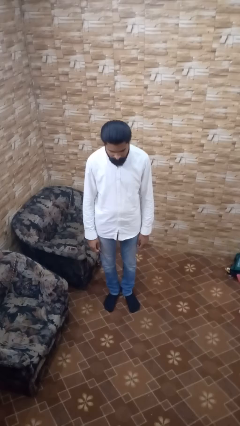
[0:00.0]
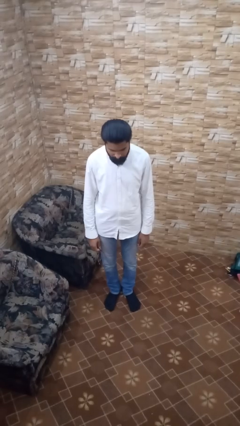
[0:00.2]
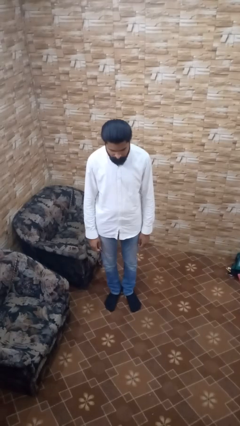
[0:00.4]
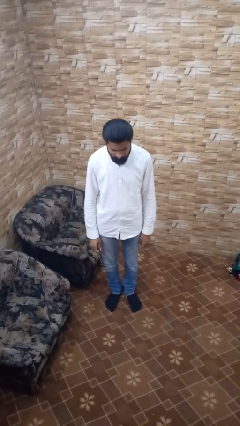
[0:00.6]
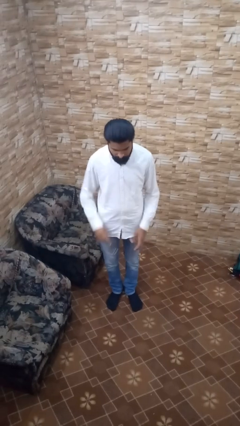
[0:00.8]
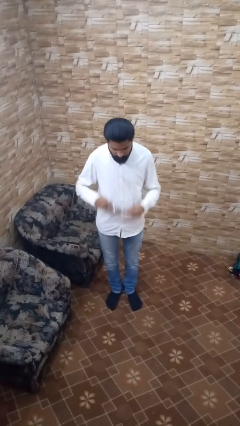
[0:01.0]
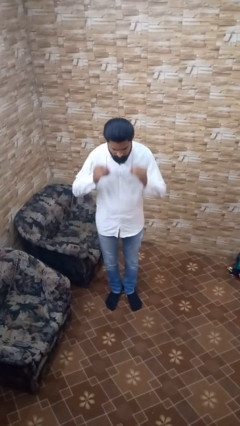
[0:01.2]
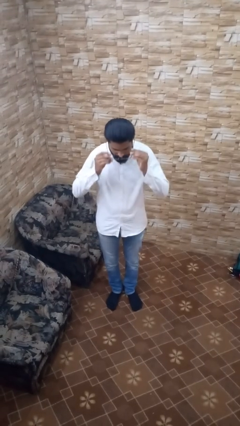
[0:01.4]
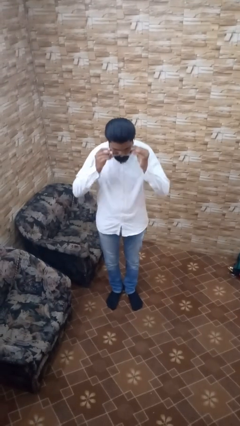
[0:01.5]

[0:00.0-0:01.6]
person puts on glasses

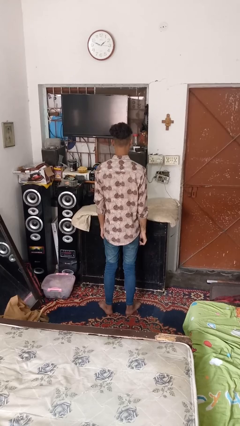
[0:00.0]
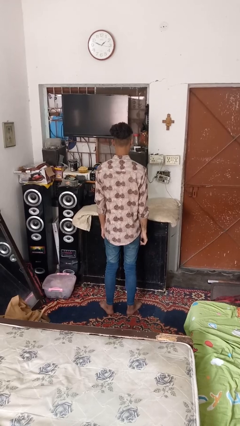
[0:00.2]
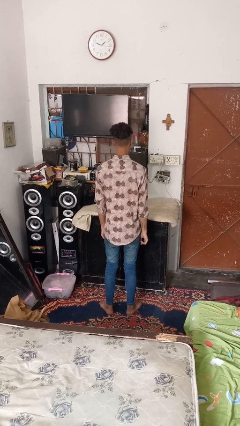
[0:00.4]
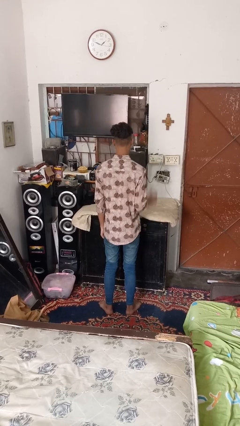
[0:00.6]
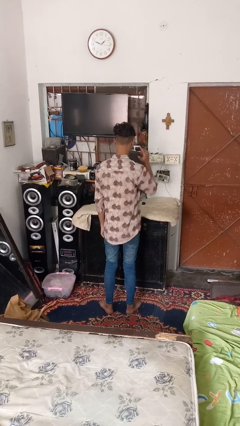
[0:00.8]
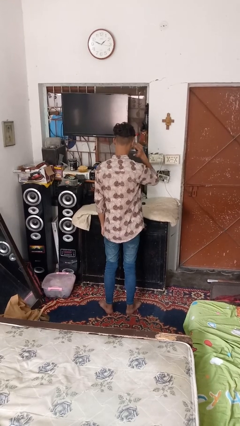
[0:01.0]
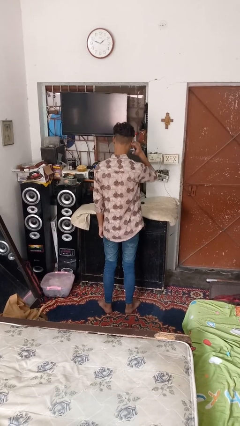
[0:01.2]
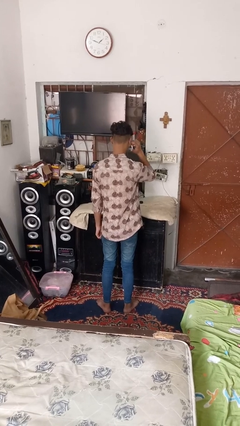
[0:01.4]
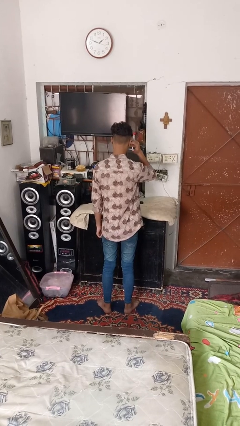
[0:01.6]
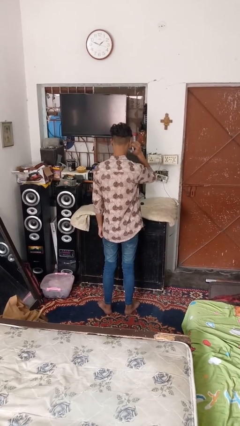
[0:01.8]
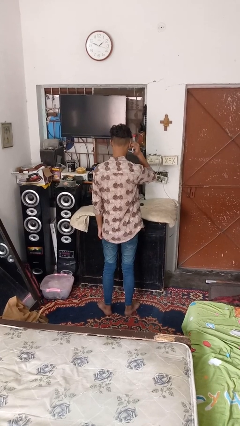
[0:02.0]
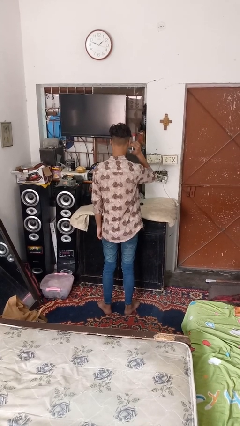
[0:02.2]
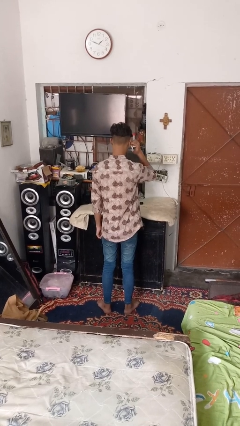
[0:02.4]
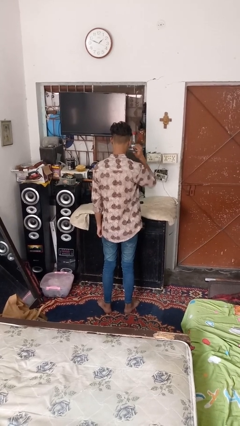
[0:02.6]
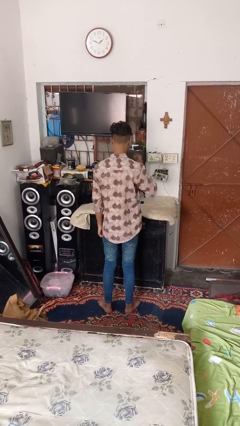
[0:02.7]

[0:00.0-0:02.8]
person puts fingers in ear

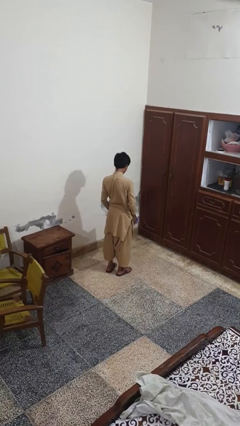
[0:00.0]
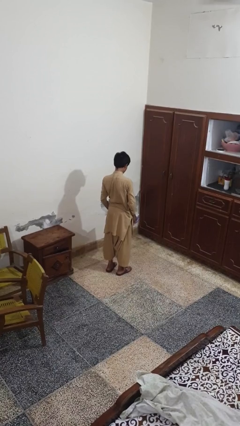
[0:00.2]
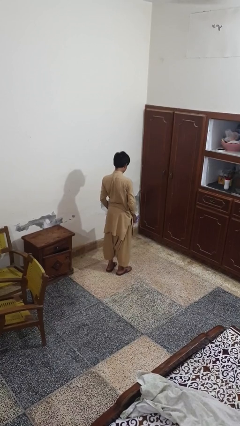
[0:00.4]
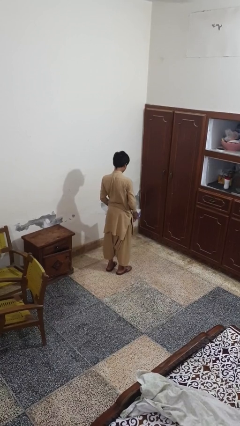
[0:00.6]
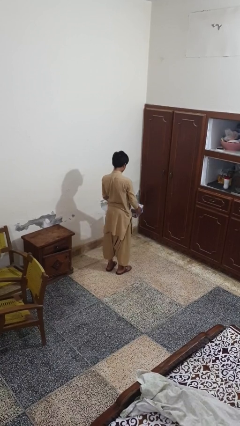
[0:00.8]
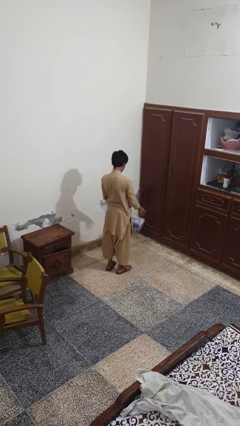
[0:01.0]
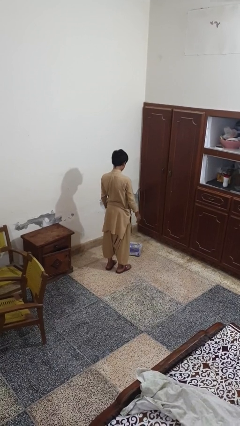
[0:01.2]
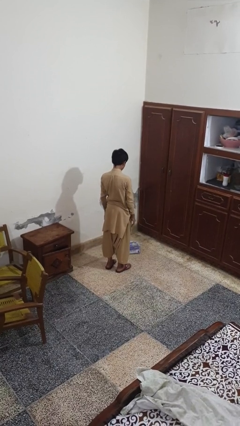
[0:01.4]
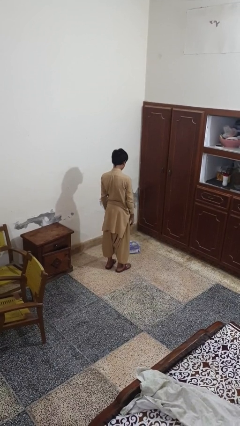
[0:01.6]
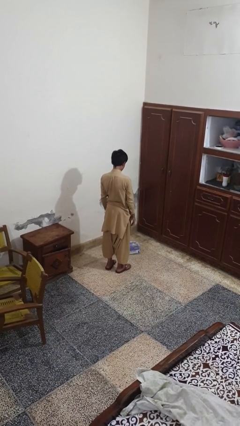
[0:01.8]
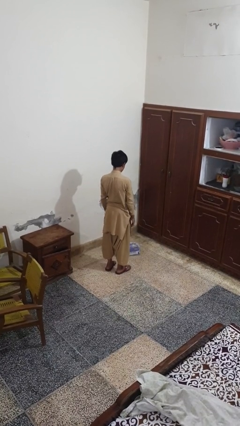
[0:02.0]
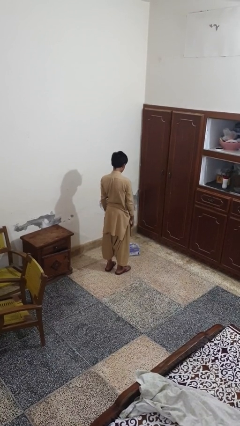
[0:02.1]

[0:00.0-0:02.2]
person throws object to ground

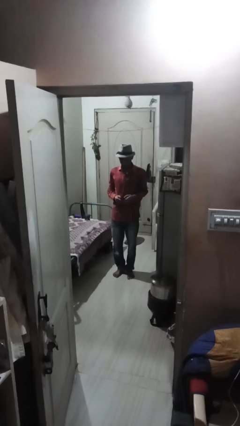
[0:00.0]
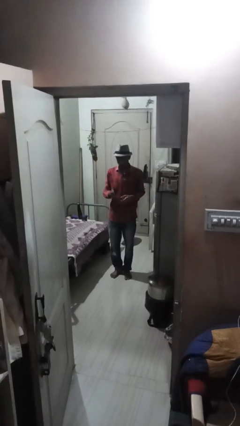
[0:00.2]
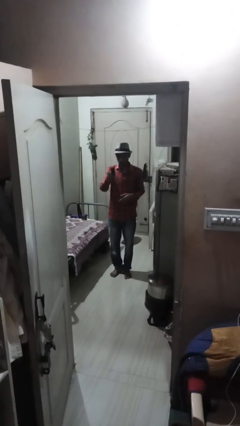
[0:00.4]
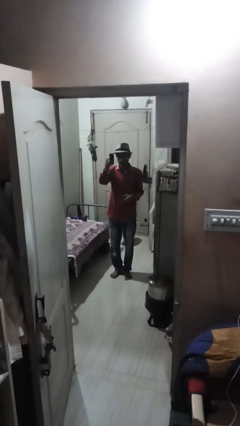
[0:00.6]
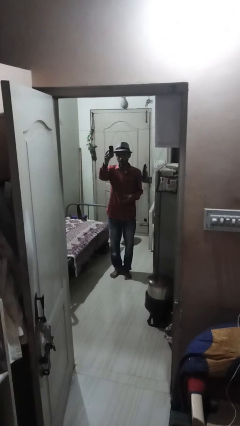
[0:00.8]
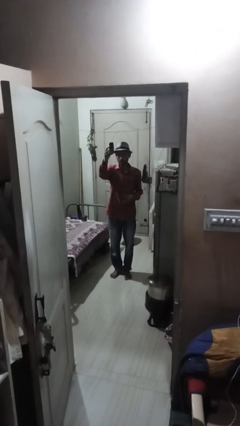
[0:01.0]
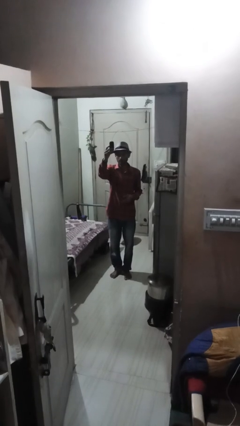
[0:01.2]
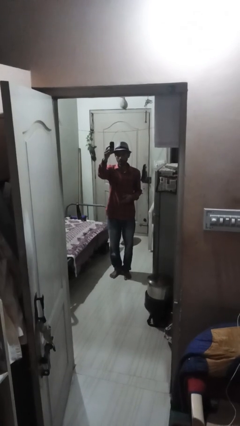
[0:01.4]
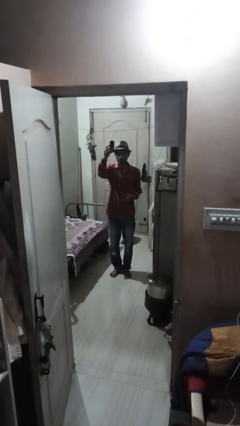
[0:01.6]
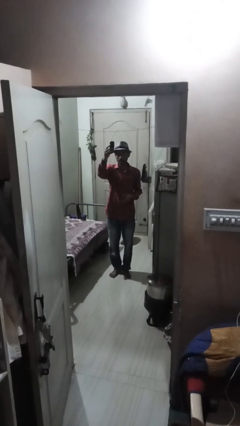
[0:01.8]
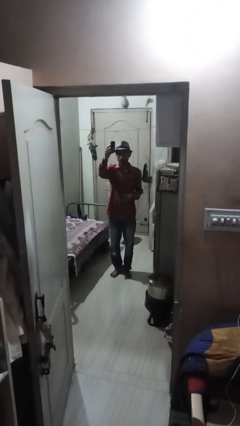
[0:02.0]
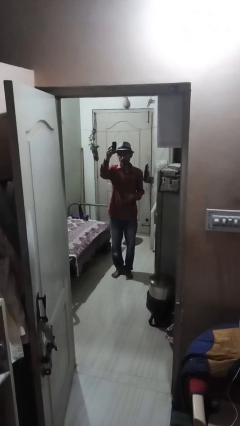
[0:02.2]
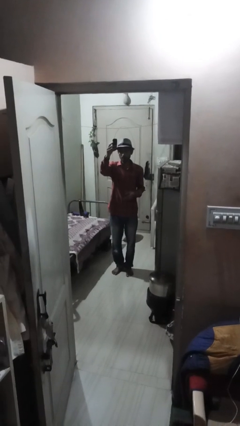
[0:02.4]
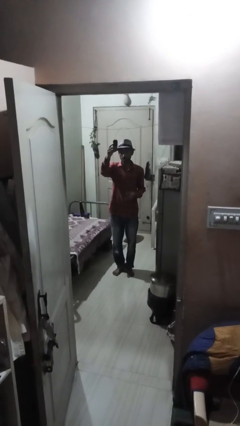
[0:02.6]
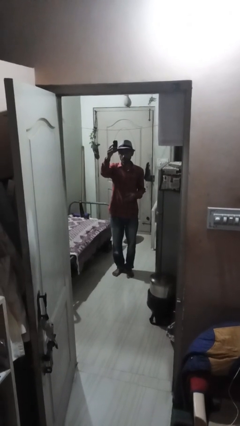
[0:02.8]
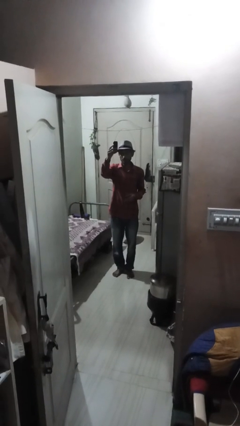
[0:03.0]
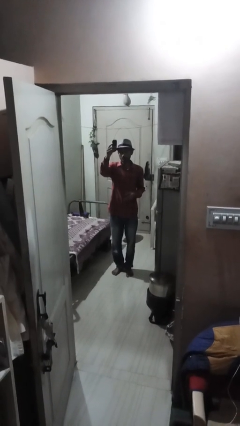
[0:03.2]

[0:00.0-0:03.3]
person takes selfie

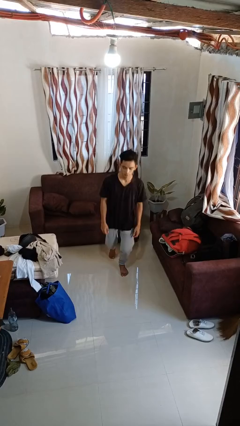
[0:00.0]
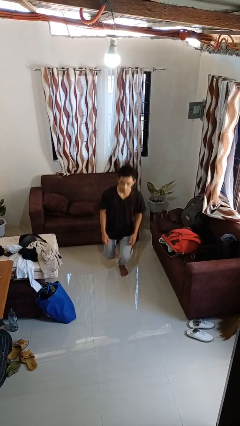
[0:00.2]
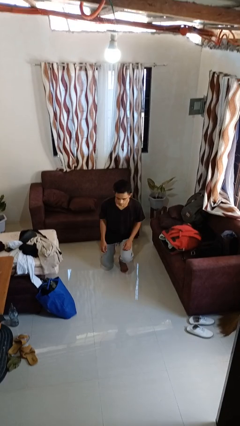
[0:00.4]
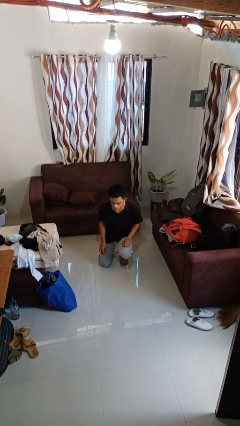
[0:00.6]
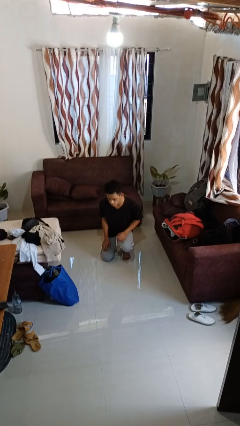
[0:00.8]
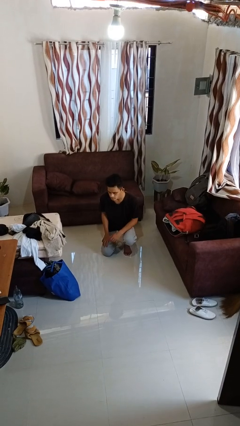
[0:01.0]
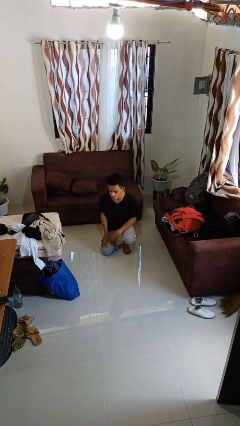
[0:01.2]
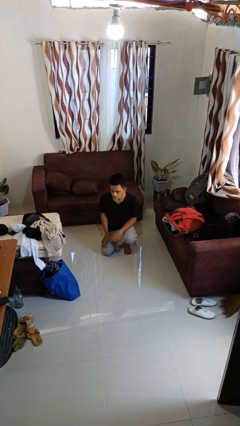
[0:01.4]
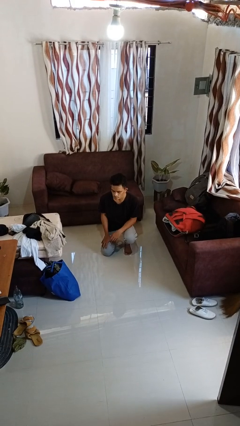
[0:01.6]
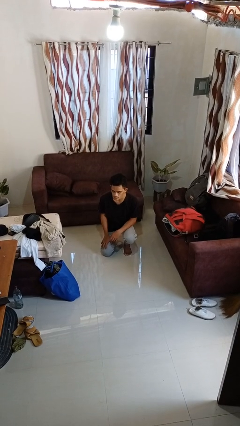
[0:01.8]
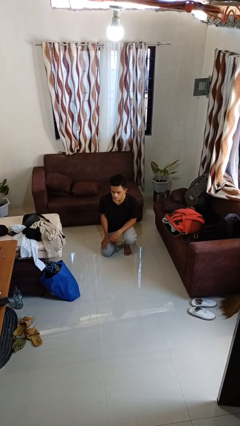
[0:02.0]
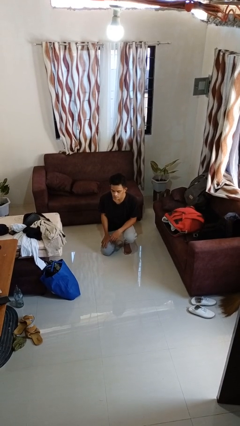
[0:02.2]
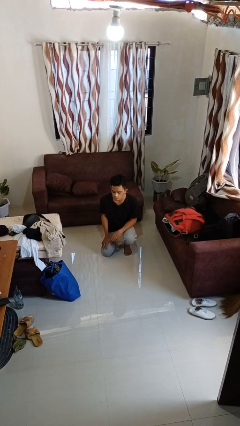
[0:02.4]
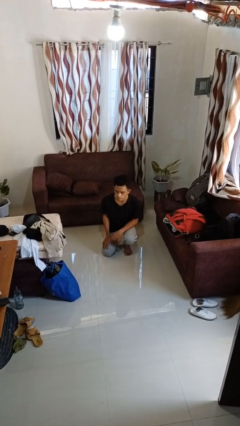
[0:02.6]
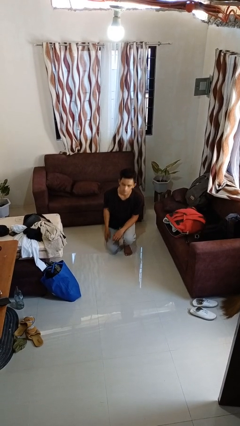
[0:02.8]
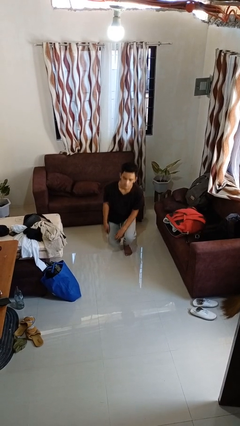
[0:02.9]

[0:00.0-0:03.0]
person kneels

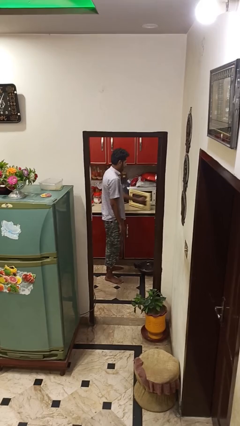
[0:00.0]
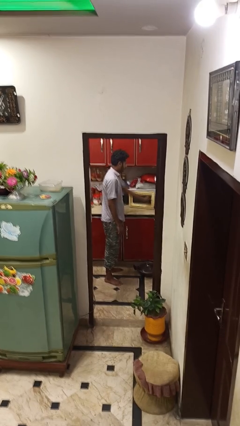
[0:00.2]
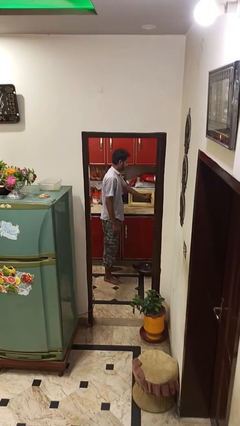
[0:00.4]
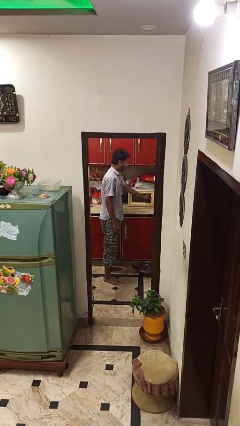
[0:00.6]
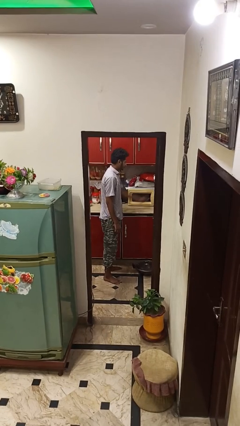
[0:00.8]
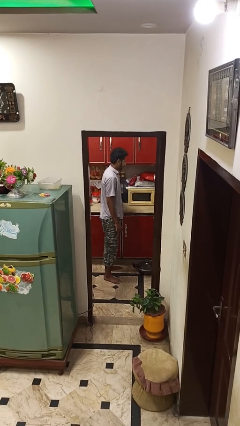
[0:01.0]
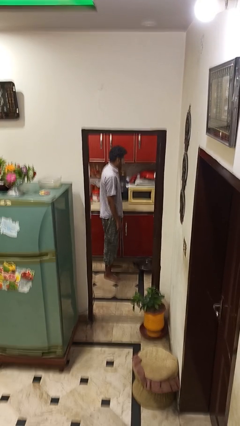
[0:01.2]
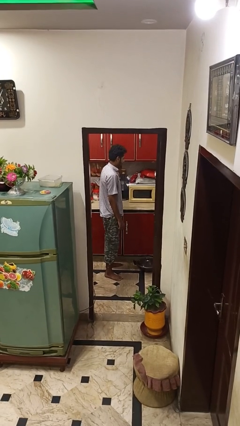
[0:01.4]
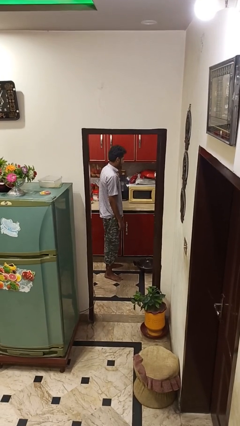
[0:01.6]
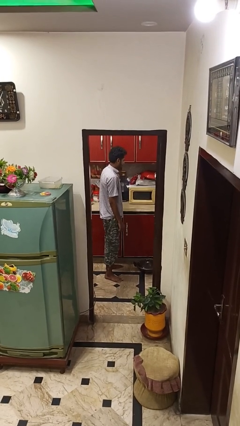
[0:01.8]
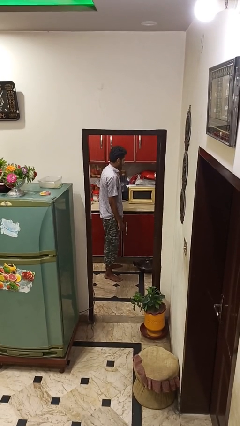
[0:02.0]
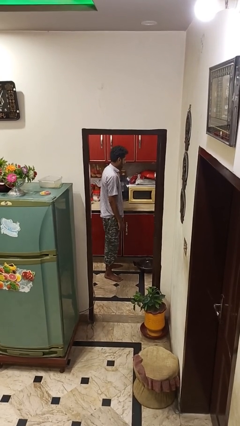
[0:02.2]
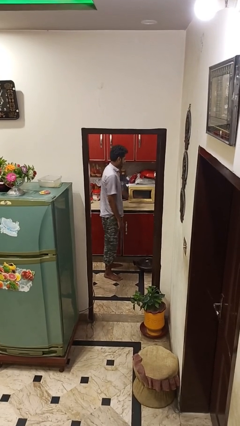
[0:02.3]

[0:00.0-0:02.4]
person closes microwave

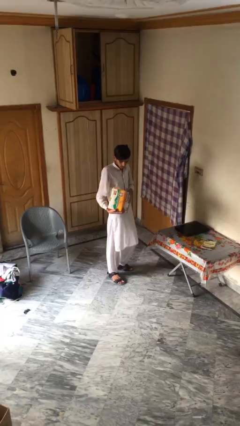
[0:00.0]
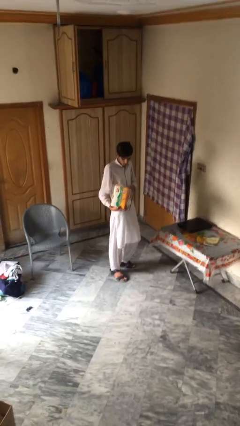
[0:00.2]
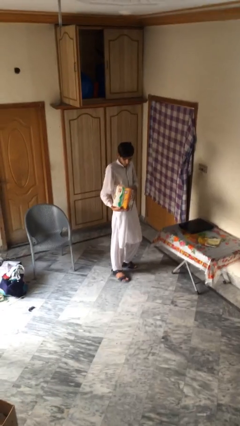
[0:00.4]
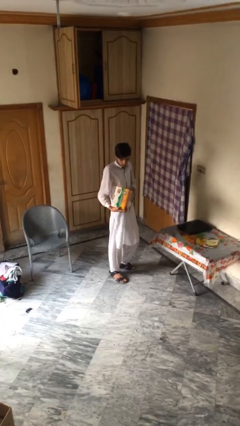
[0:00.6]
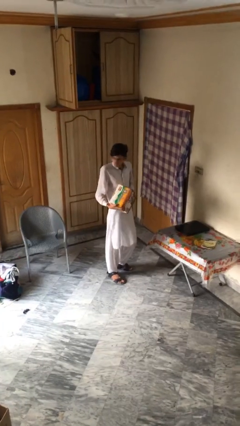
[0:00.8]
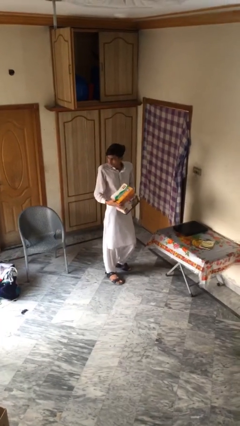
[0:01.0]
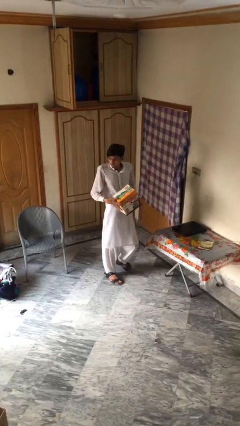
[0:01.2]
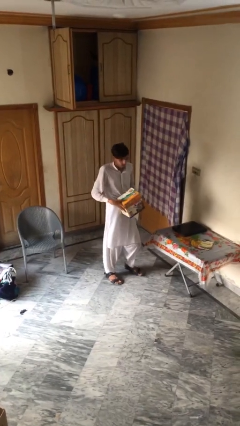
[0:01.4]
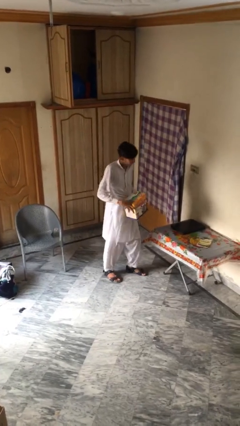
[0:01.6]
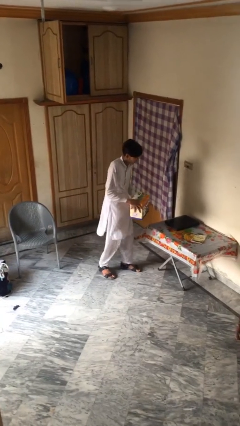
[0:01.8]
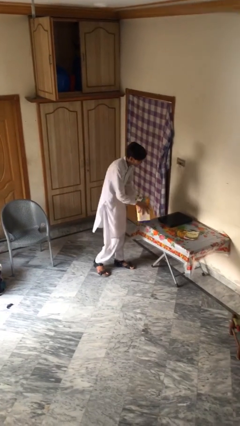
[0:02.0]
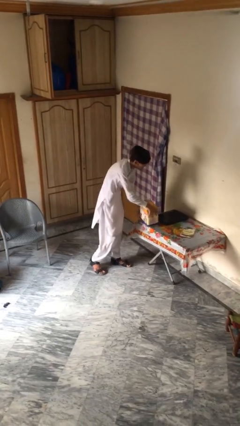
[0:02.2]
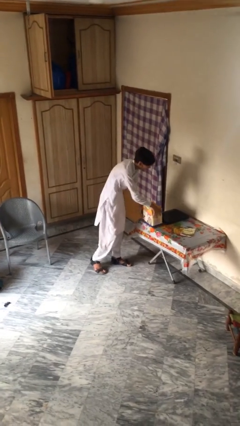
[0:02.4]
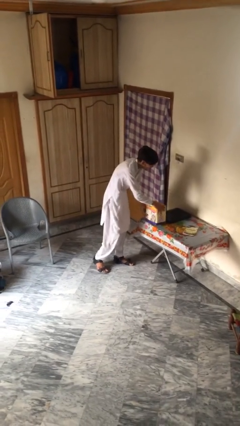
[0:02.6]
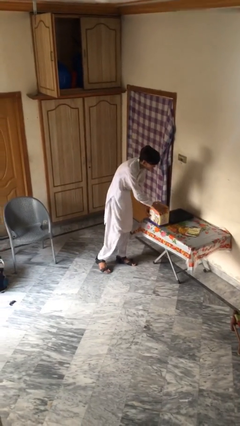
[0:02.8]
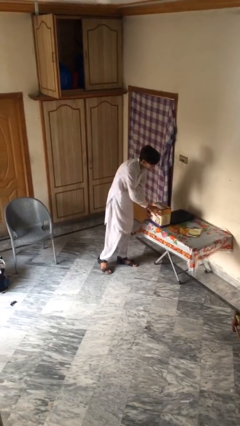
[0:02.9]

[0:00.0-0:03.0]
person puts down object on table
